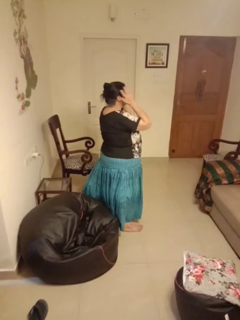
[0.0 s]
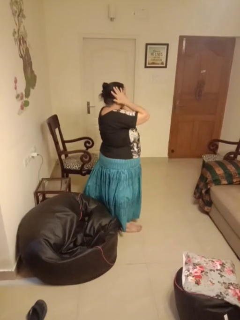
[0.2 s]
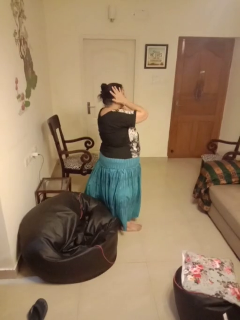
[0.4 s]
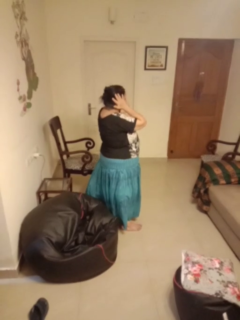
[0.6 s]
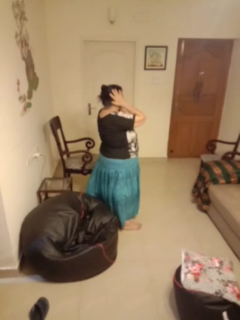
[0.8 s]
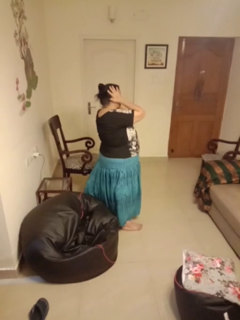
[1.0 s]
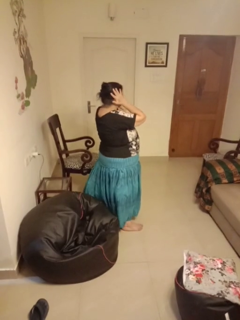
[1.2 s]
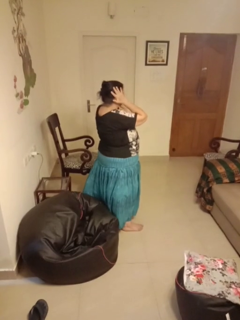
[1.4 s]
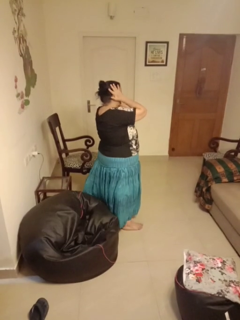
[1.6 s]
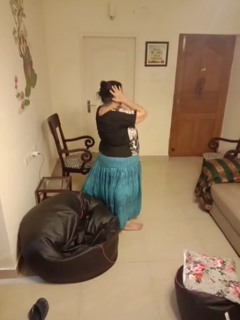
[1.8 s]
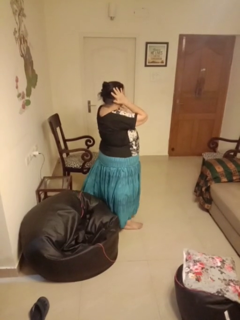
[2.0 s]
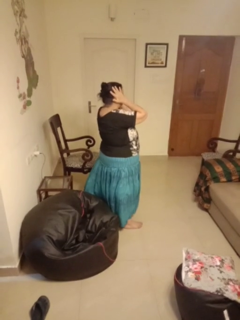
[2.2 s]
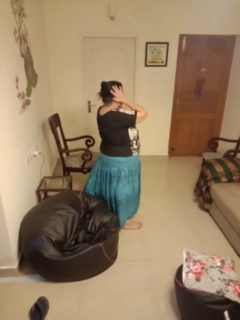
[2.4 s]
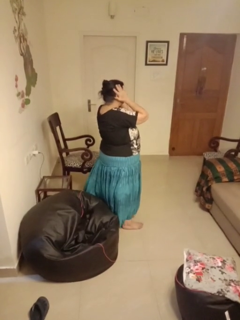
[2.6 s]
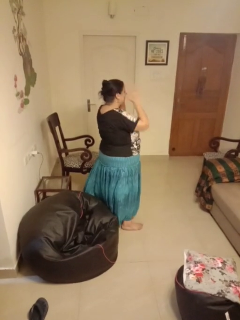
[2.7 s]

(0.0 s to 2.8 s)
person puts fingers in ear

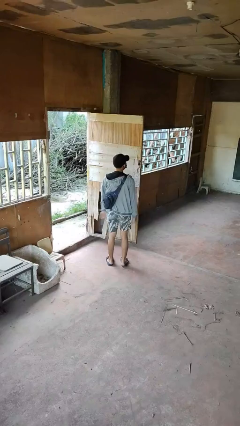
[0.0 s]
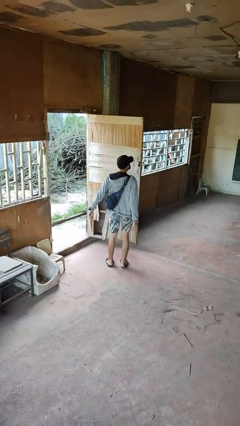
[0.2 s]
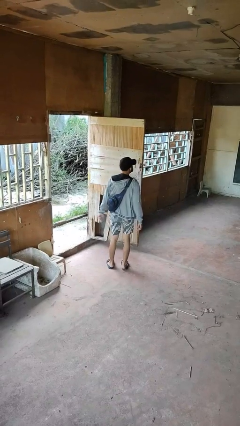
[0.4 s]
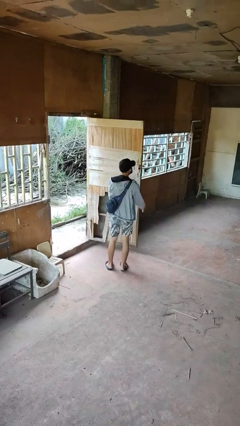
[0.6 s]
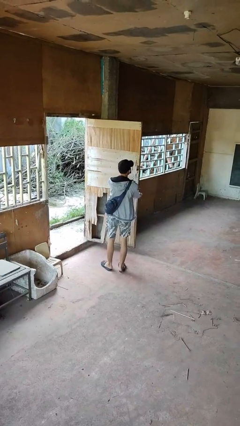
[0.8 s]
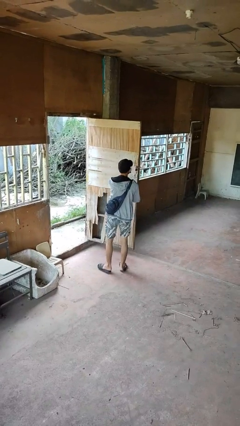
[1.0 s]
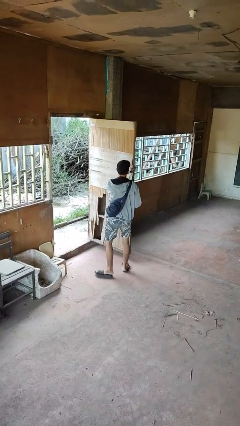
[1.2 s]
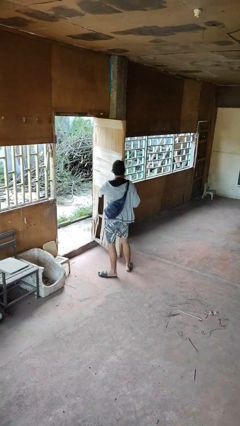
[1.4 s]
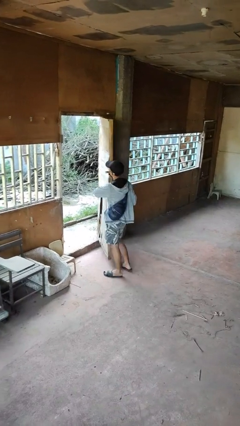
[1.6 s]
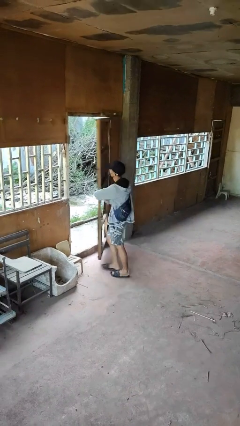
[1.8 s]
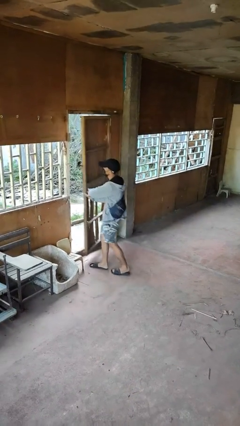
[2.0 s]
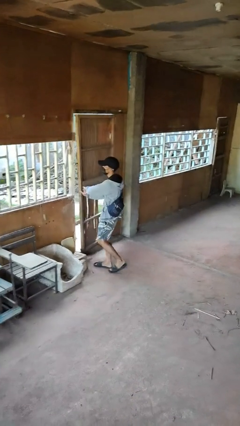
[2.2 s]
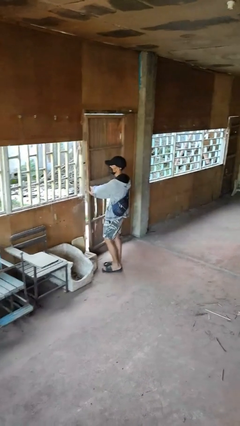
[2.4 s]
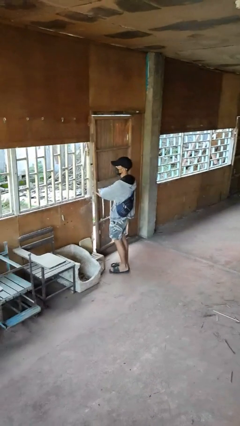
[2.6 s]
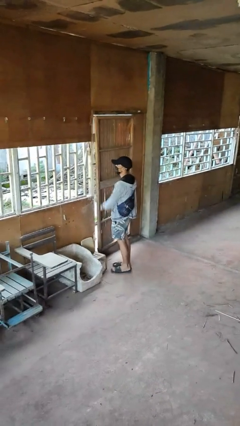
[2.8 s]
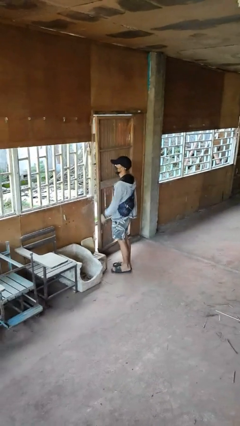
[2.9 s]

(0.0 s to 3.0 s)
person closes facility door

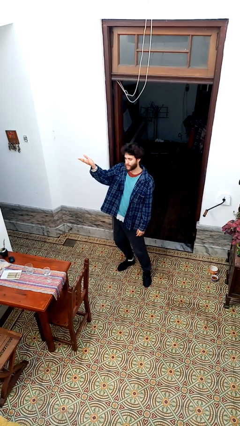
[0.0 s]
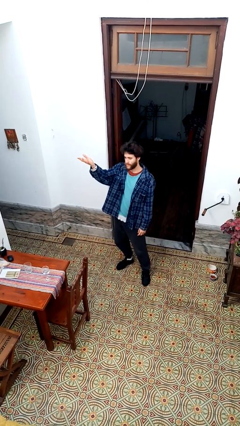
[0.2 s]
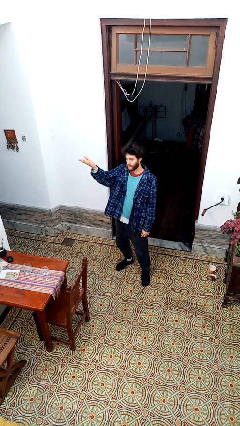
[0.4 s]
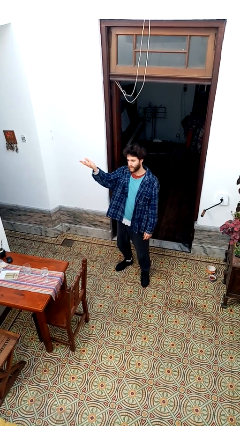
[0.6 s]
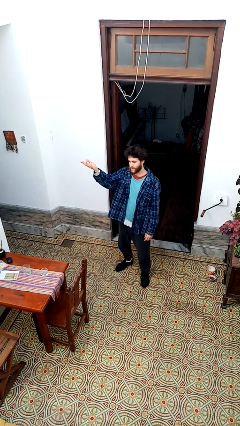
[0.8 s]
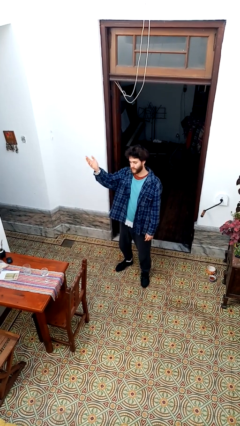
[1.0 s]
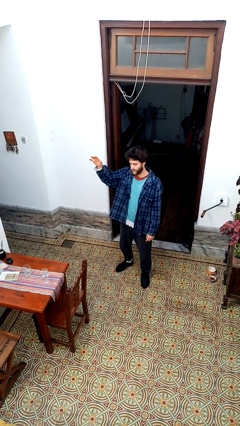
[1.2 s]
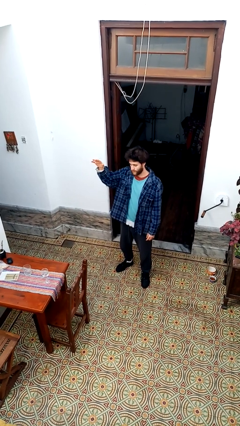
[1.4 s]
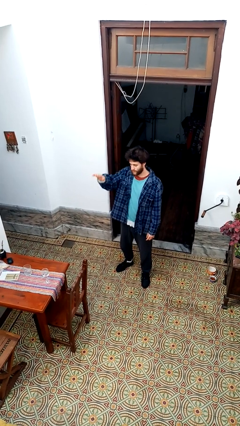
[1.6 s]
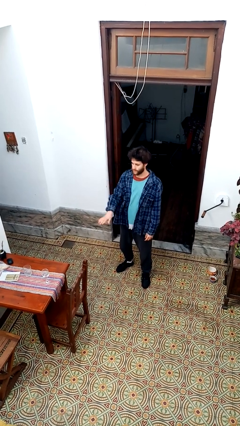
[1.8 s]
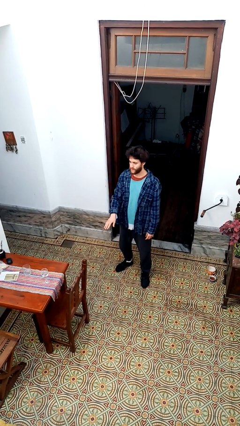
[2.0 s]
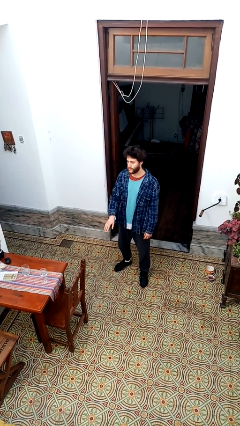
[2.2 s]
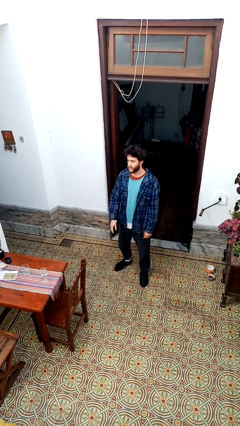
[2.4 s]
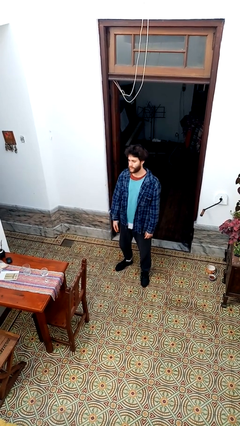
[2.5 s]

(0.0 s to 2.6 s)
person gestures swipe down

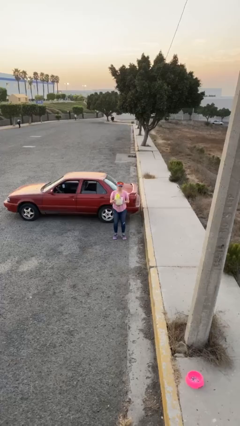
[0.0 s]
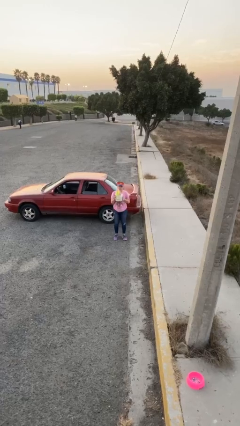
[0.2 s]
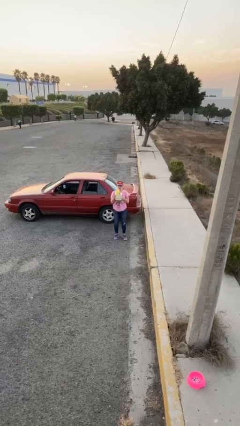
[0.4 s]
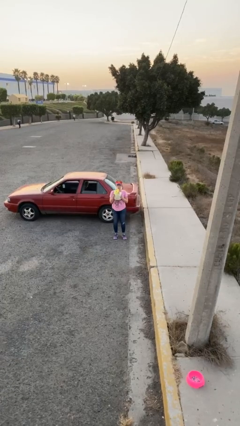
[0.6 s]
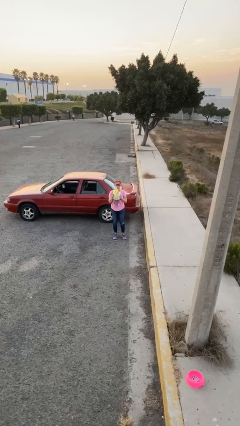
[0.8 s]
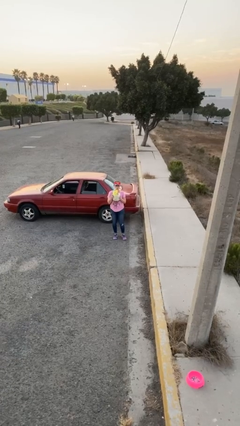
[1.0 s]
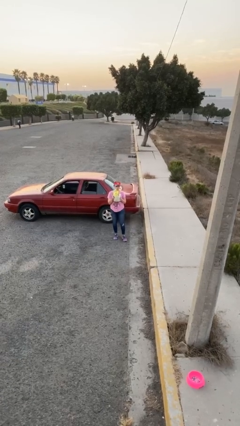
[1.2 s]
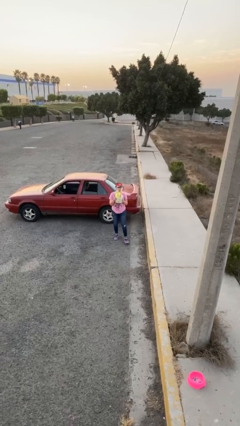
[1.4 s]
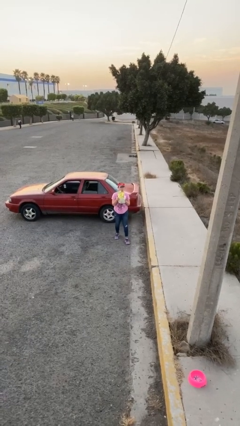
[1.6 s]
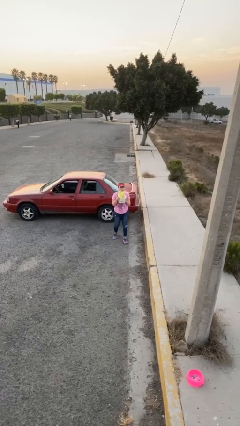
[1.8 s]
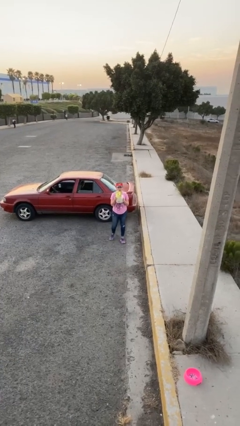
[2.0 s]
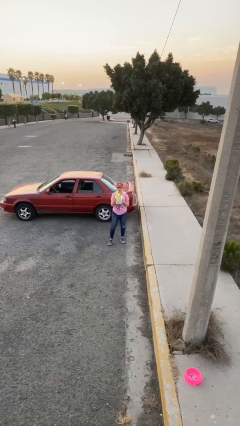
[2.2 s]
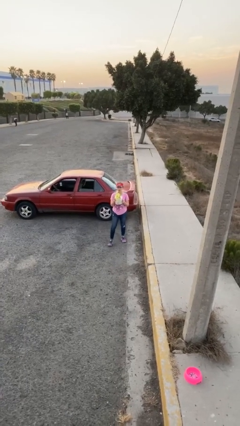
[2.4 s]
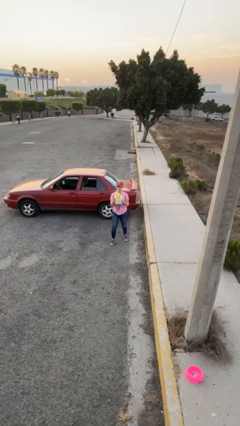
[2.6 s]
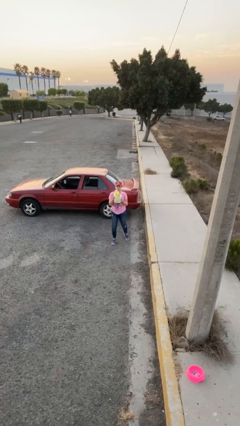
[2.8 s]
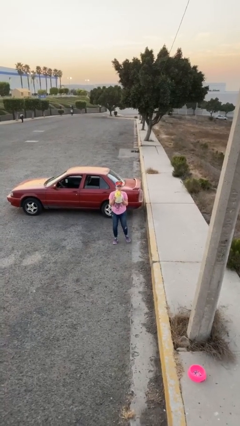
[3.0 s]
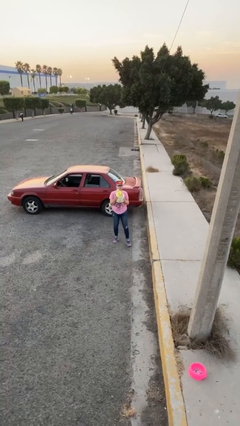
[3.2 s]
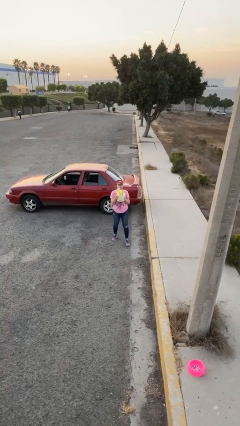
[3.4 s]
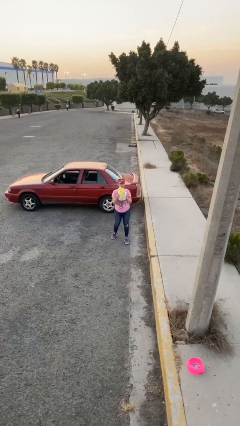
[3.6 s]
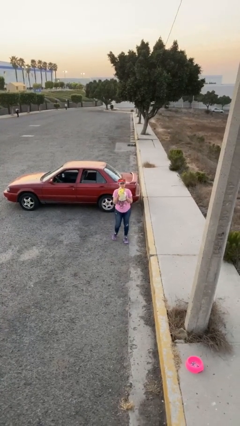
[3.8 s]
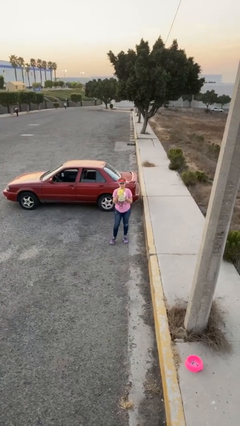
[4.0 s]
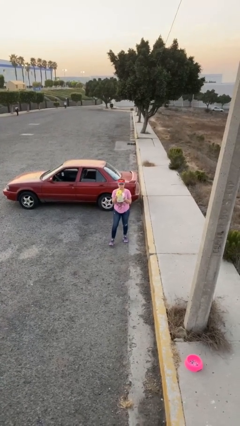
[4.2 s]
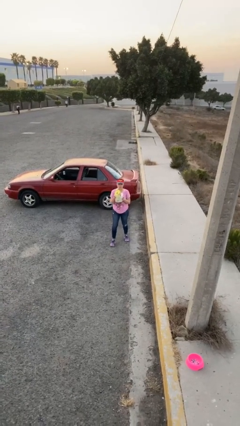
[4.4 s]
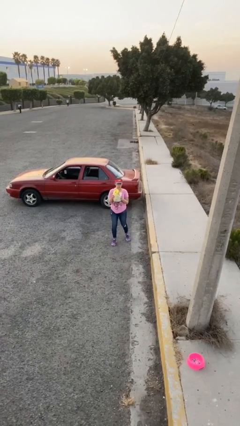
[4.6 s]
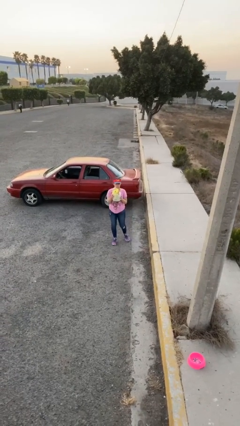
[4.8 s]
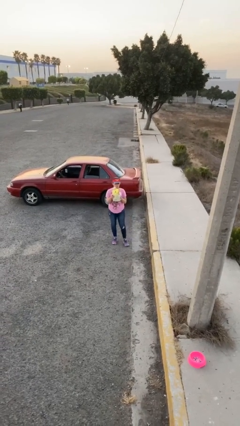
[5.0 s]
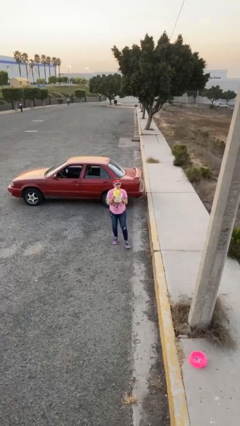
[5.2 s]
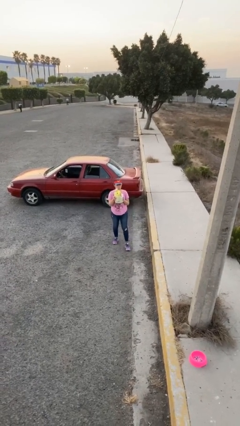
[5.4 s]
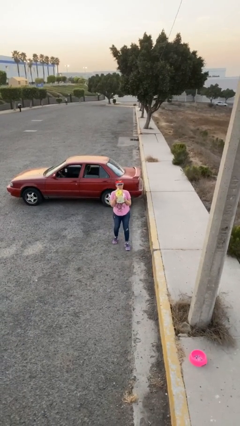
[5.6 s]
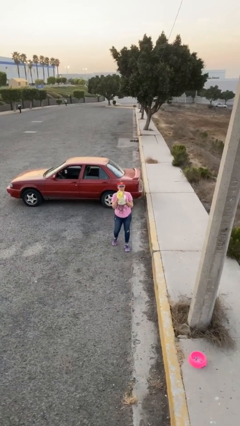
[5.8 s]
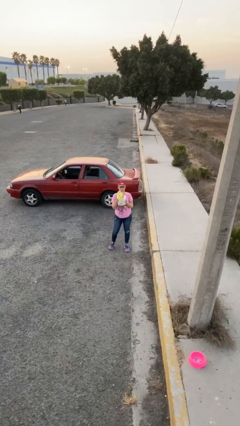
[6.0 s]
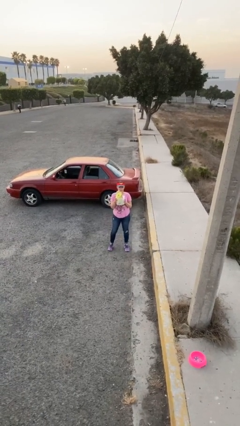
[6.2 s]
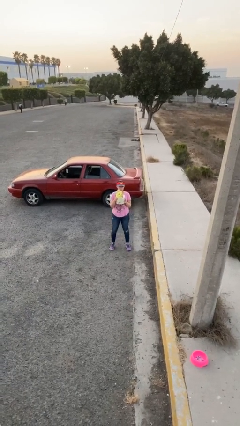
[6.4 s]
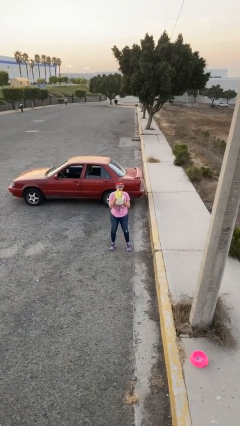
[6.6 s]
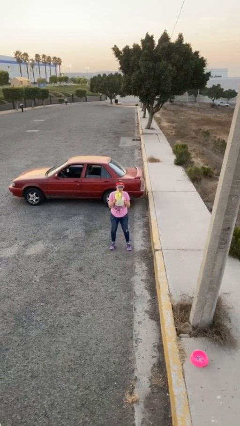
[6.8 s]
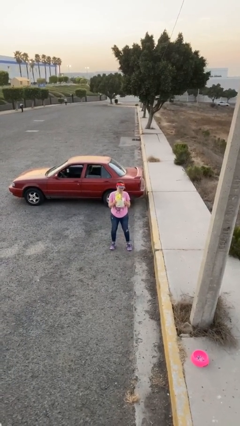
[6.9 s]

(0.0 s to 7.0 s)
person carries heavy object

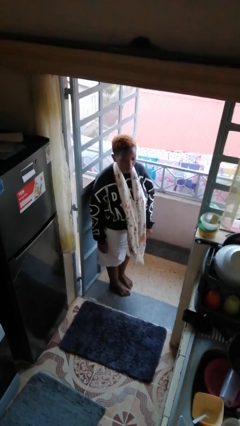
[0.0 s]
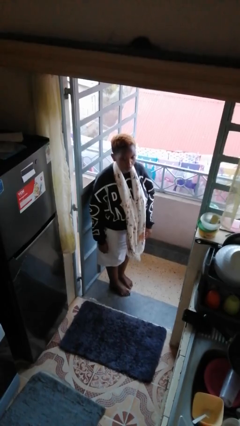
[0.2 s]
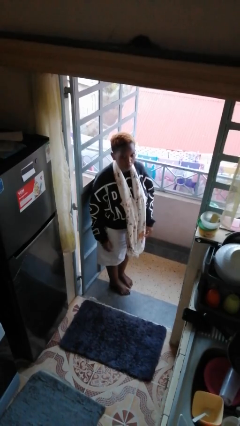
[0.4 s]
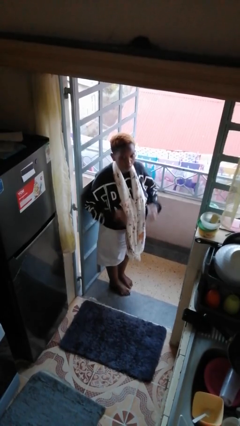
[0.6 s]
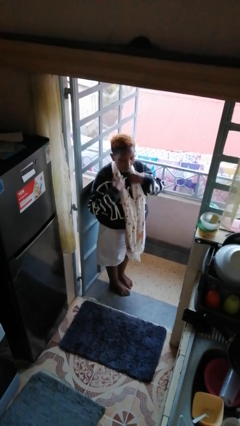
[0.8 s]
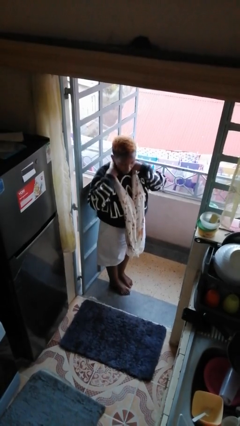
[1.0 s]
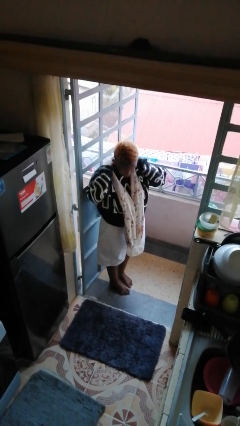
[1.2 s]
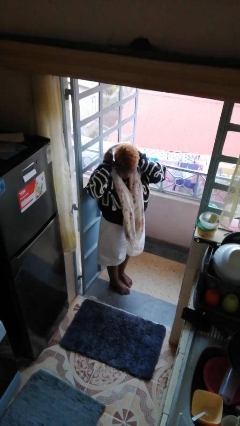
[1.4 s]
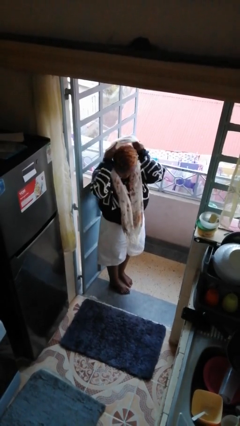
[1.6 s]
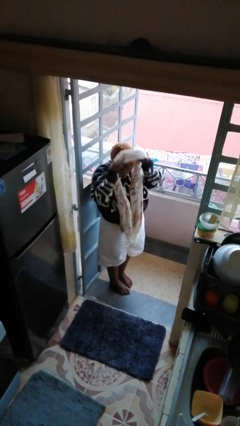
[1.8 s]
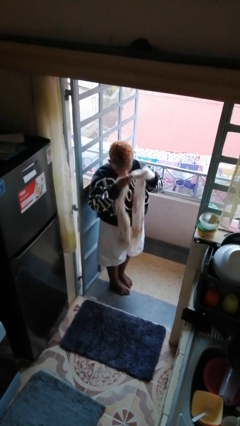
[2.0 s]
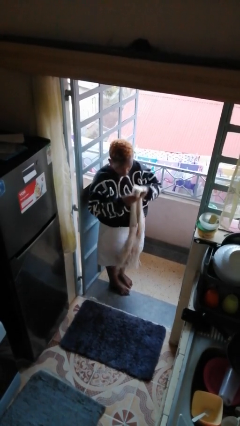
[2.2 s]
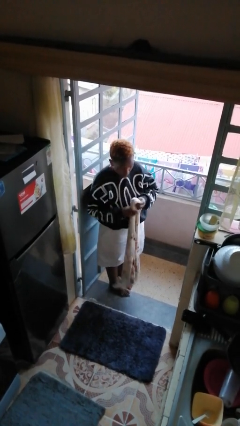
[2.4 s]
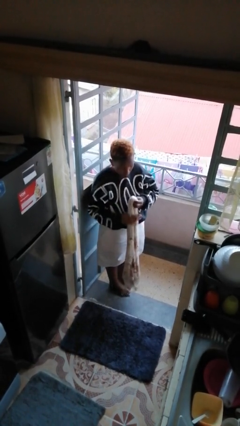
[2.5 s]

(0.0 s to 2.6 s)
person takes off scarf

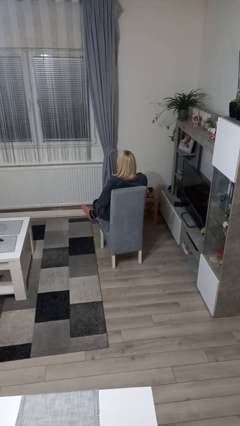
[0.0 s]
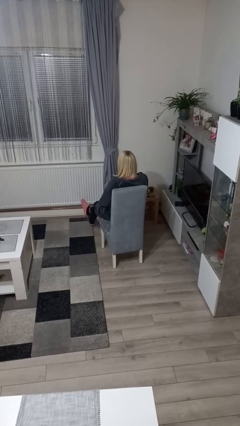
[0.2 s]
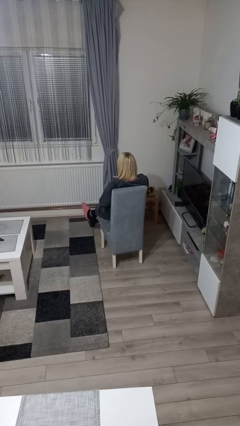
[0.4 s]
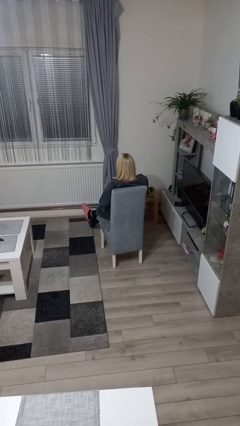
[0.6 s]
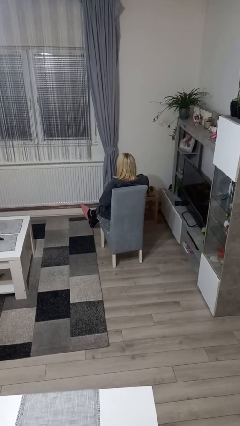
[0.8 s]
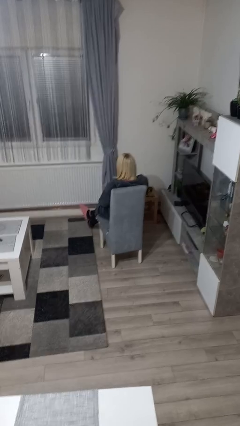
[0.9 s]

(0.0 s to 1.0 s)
person crosses legs
